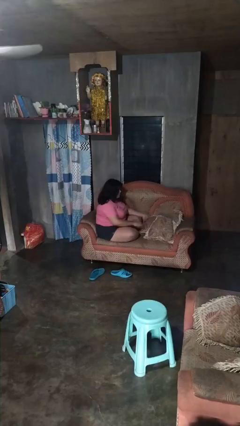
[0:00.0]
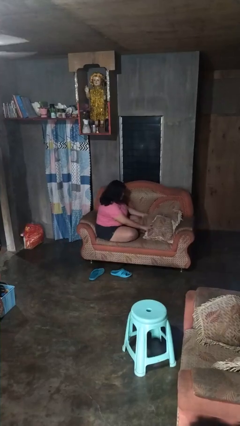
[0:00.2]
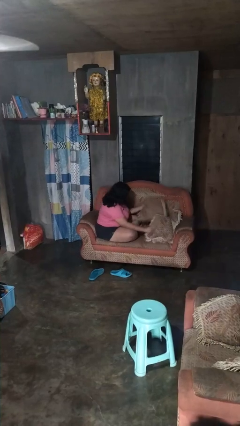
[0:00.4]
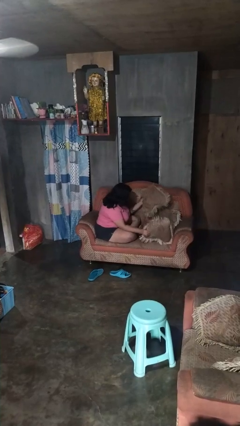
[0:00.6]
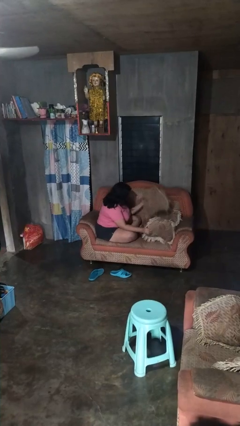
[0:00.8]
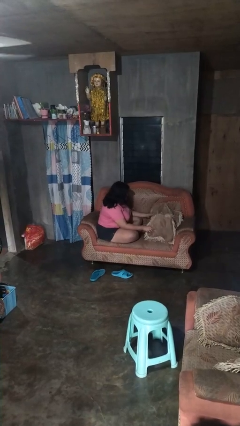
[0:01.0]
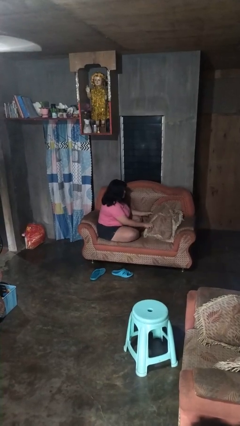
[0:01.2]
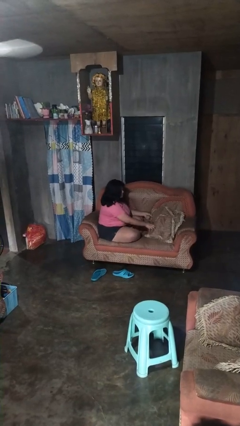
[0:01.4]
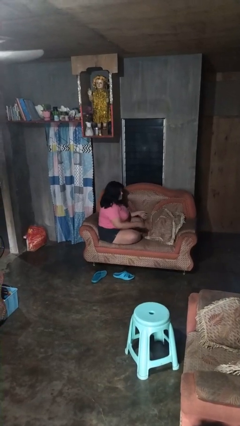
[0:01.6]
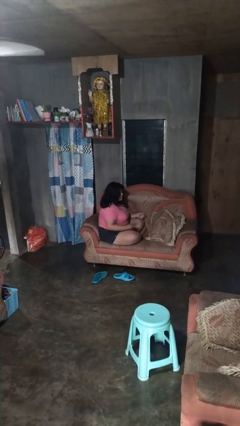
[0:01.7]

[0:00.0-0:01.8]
person searches in couch

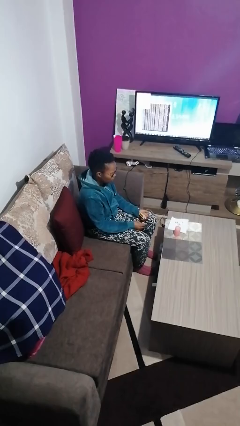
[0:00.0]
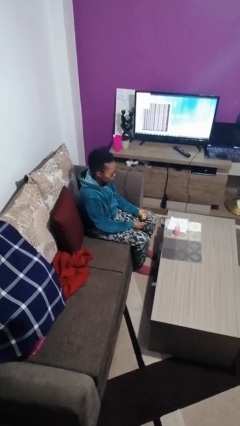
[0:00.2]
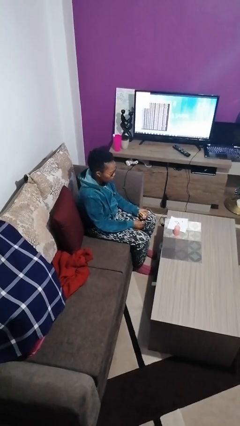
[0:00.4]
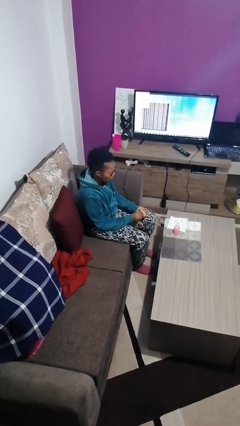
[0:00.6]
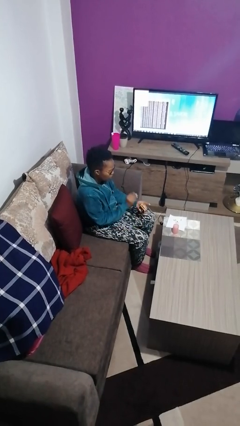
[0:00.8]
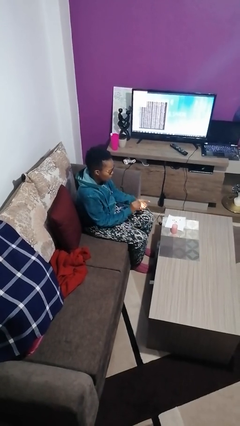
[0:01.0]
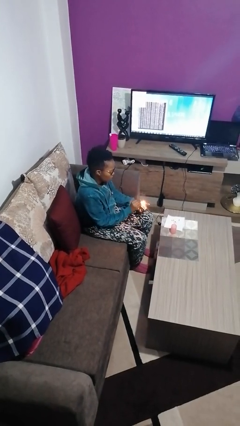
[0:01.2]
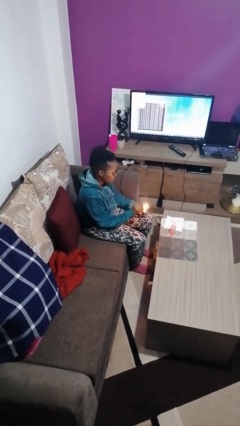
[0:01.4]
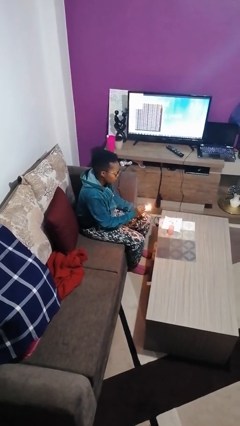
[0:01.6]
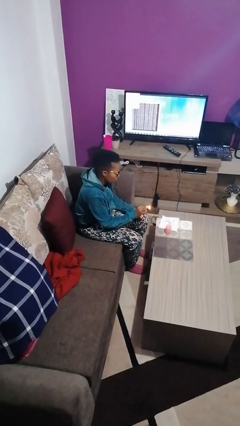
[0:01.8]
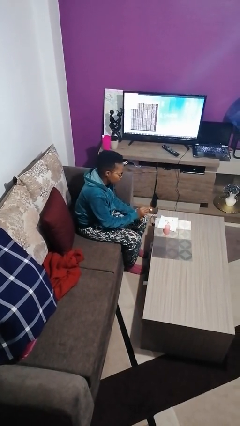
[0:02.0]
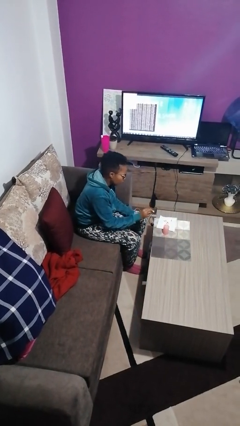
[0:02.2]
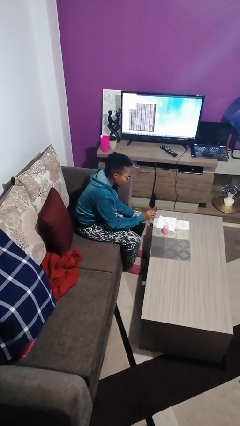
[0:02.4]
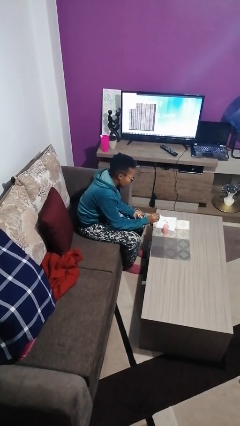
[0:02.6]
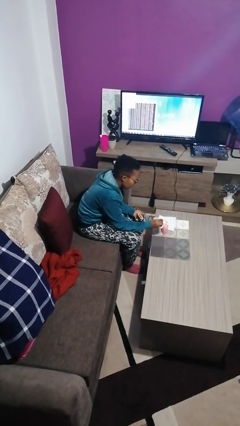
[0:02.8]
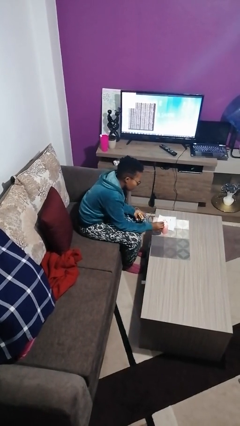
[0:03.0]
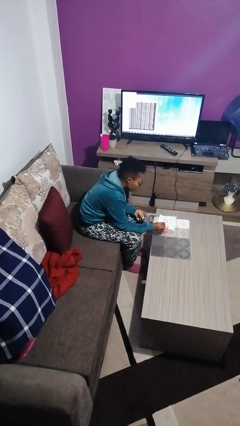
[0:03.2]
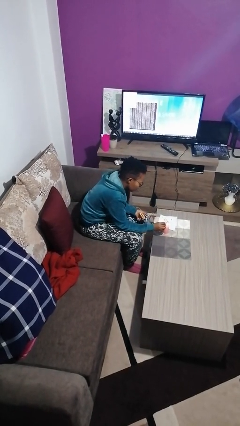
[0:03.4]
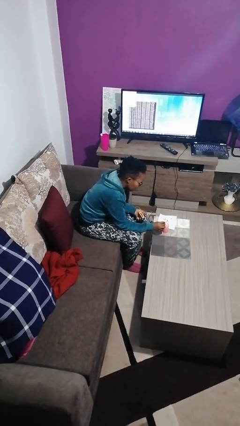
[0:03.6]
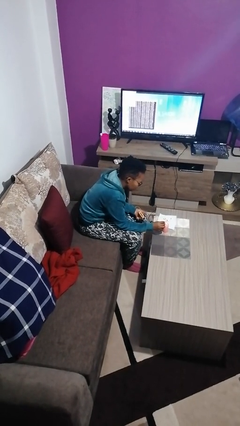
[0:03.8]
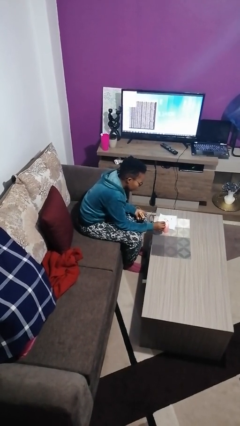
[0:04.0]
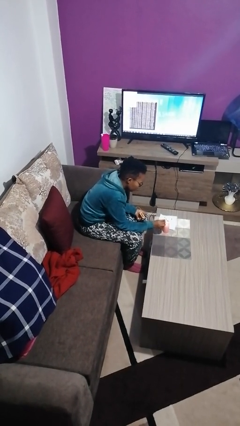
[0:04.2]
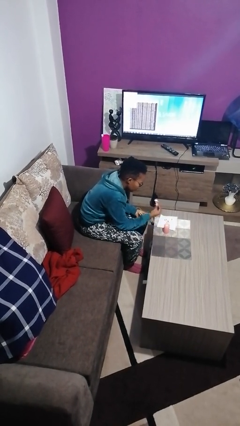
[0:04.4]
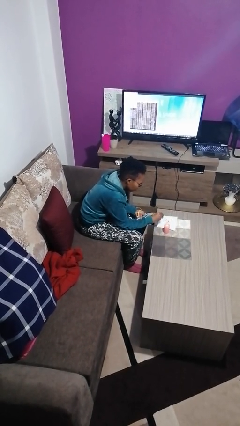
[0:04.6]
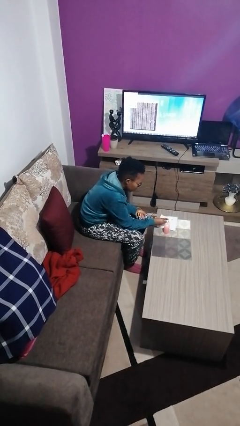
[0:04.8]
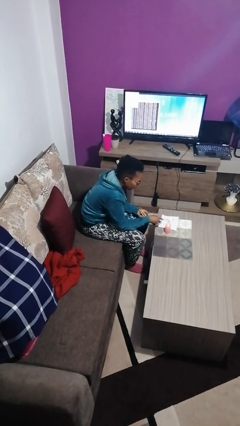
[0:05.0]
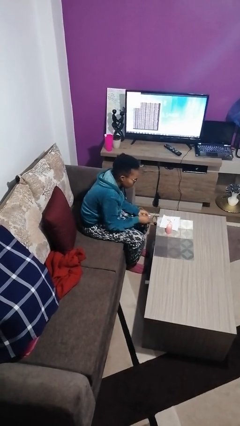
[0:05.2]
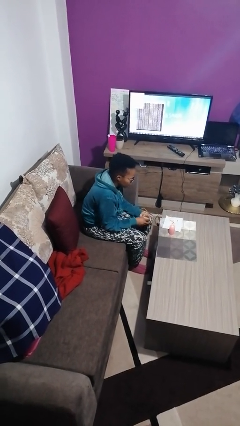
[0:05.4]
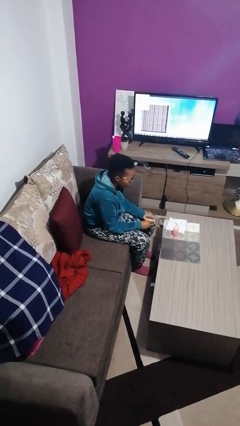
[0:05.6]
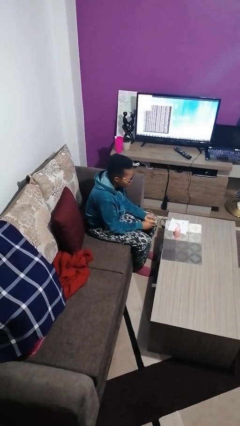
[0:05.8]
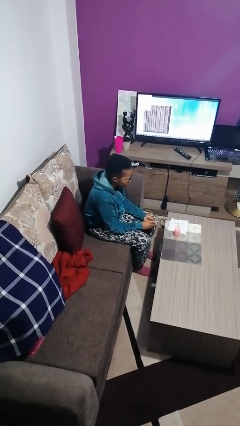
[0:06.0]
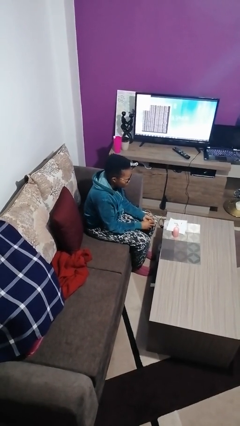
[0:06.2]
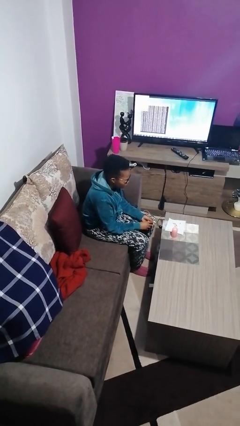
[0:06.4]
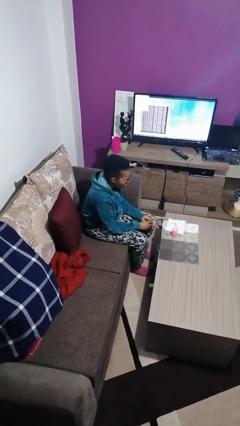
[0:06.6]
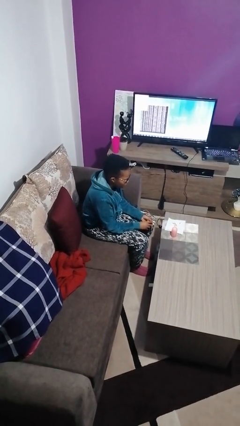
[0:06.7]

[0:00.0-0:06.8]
person lights candle

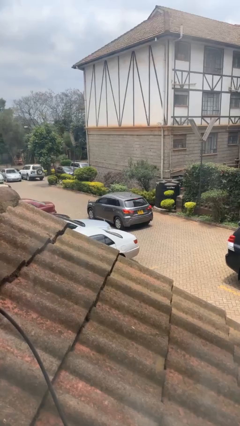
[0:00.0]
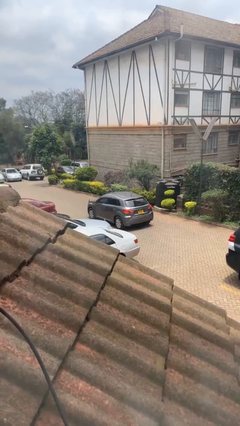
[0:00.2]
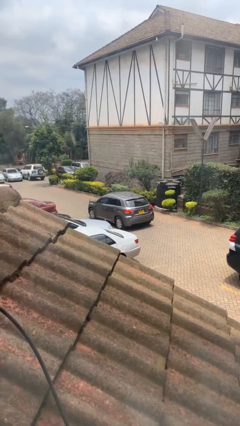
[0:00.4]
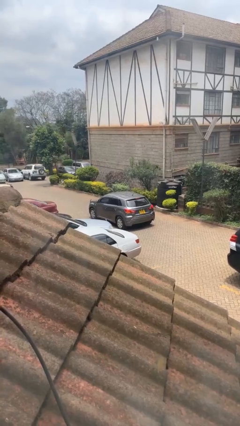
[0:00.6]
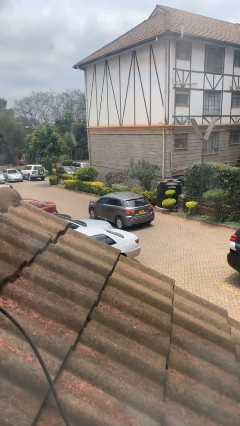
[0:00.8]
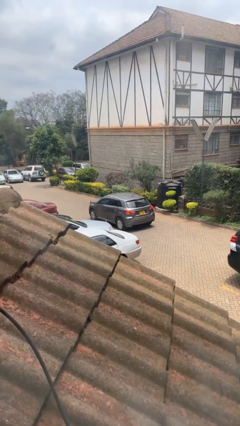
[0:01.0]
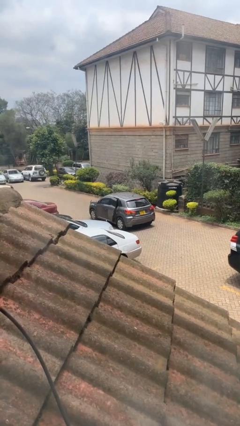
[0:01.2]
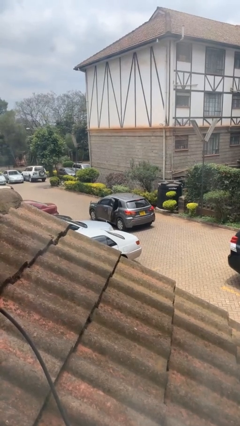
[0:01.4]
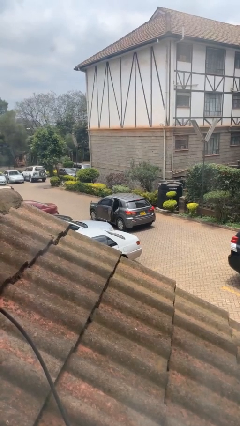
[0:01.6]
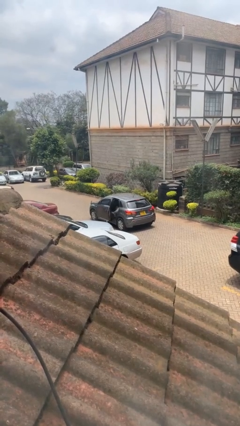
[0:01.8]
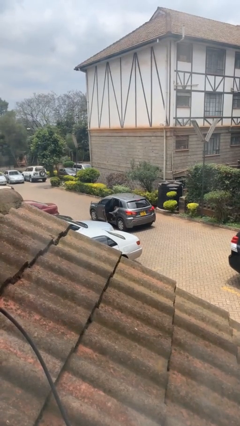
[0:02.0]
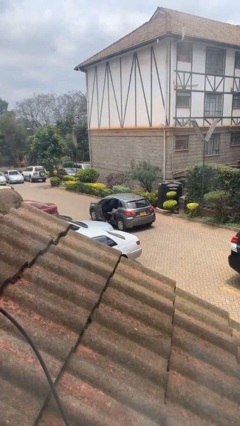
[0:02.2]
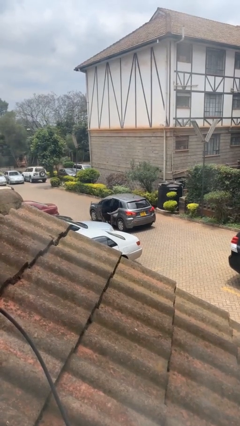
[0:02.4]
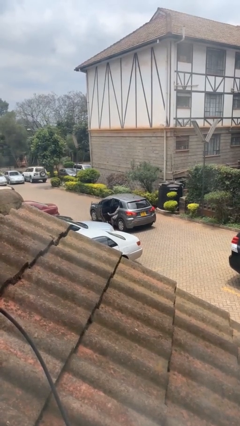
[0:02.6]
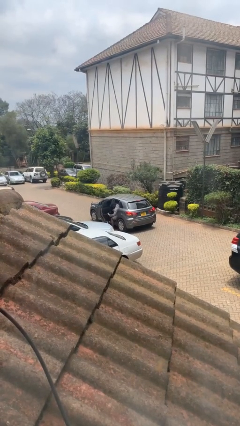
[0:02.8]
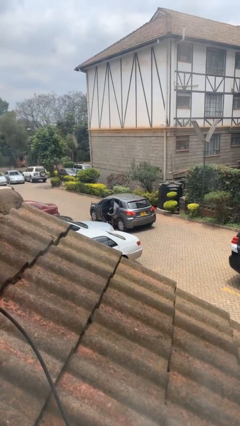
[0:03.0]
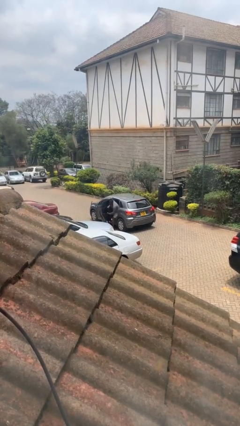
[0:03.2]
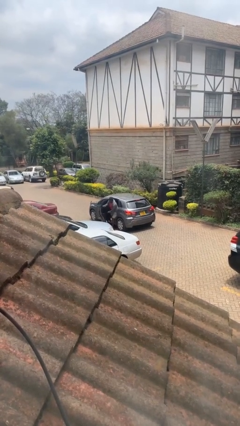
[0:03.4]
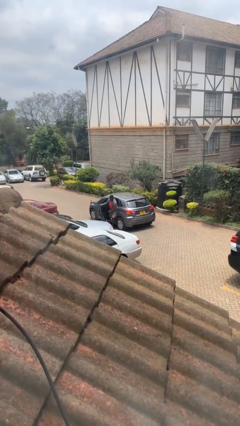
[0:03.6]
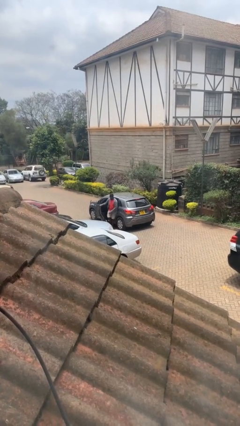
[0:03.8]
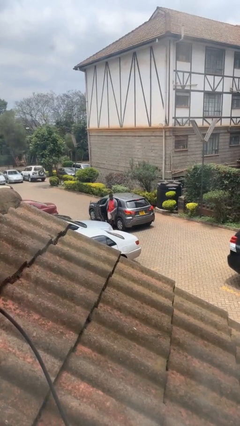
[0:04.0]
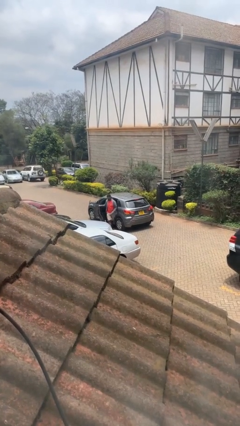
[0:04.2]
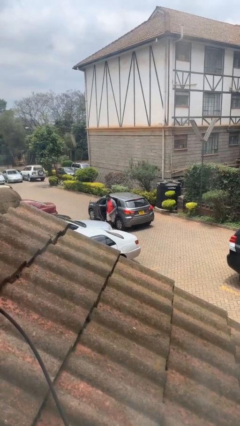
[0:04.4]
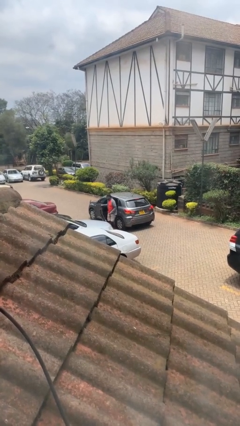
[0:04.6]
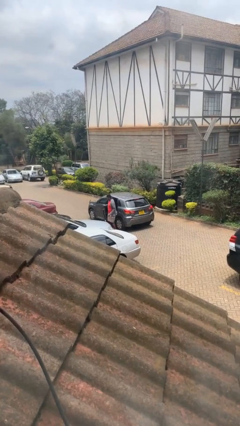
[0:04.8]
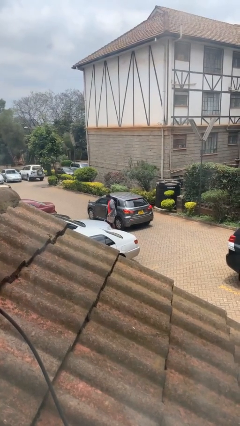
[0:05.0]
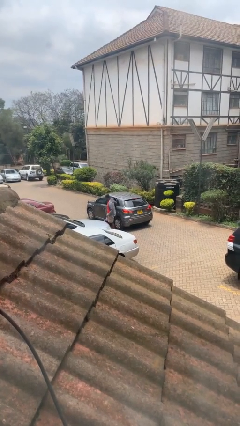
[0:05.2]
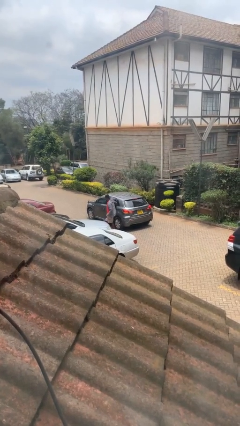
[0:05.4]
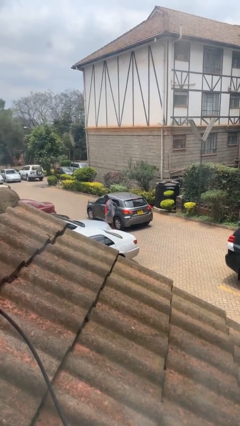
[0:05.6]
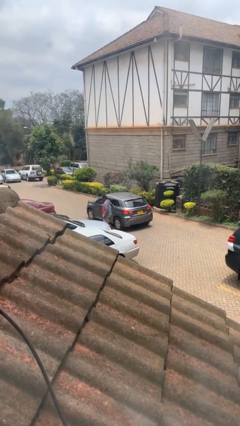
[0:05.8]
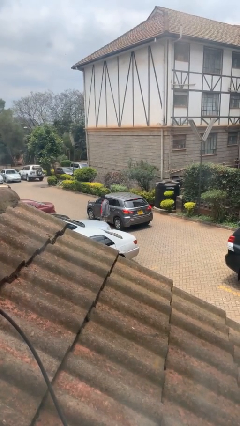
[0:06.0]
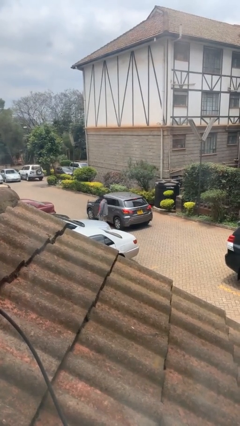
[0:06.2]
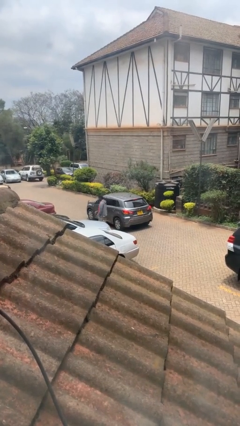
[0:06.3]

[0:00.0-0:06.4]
car drops off person

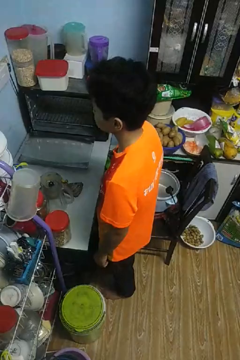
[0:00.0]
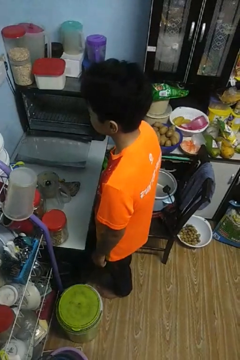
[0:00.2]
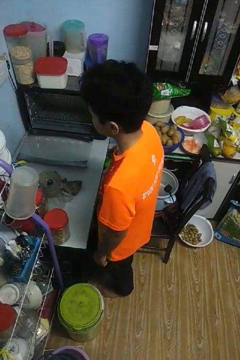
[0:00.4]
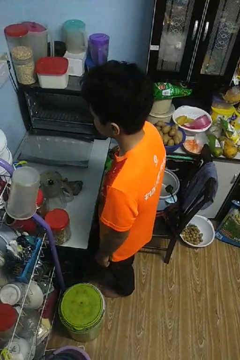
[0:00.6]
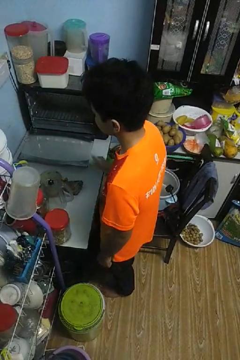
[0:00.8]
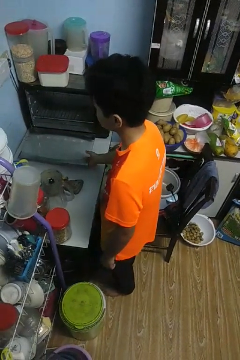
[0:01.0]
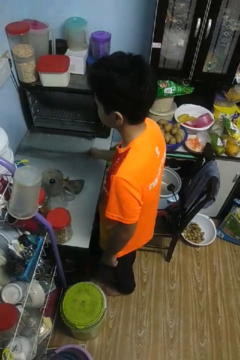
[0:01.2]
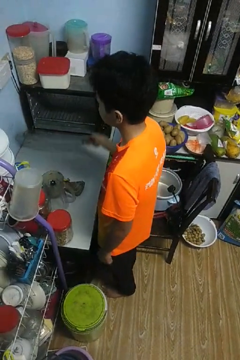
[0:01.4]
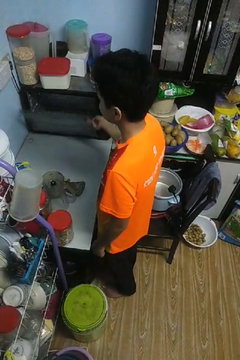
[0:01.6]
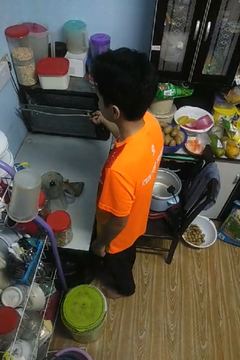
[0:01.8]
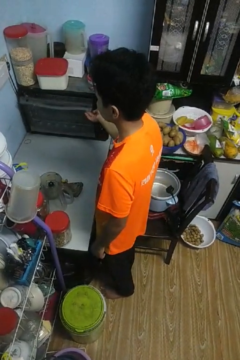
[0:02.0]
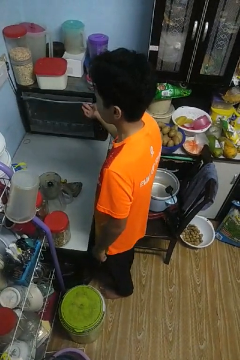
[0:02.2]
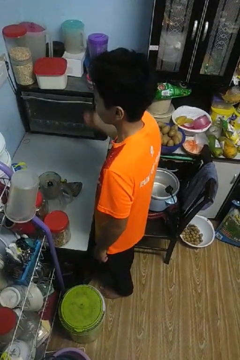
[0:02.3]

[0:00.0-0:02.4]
person closes oven door

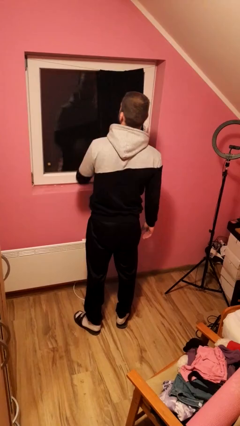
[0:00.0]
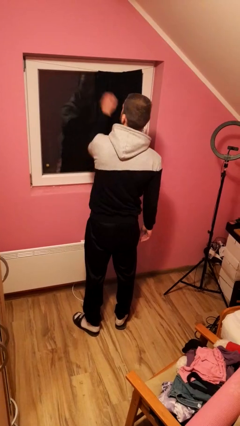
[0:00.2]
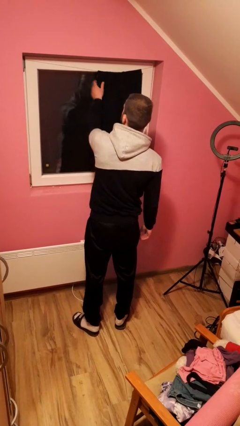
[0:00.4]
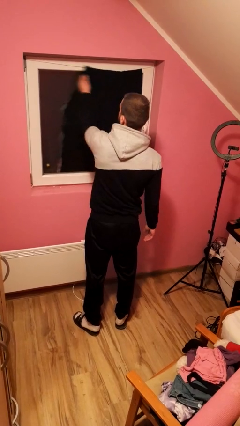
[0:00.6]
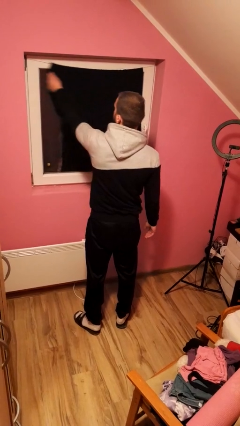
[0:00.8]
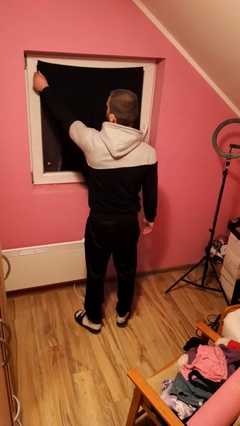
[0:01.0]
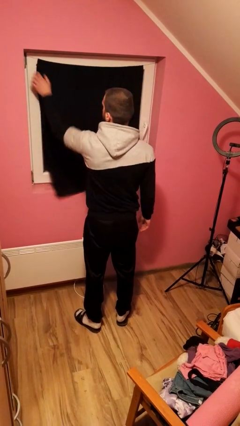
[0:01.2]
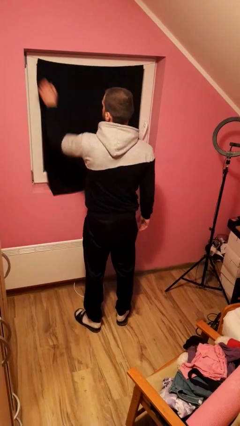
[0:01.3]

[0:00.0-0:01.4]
person closes curtains
